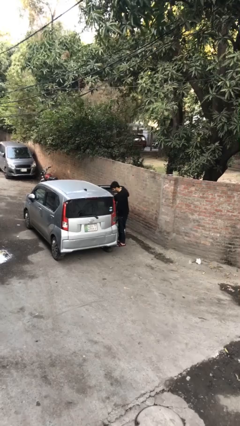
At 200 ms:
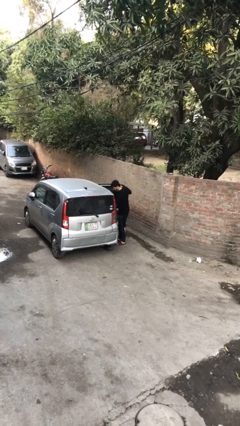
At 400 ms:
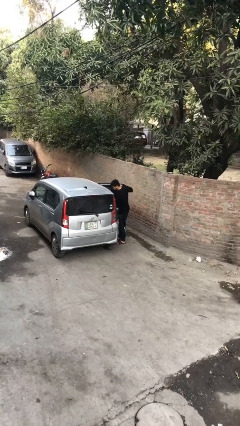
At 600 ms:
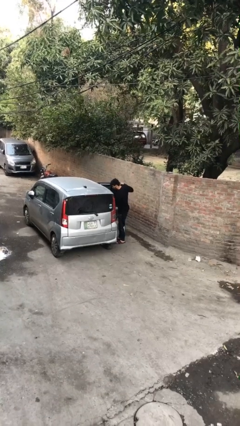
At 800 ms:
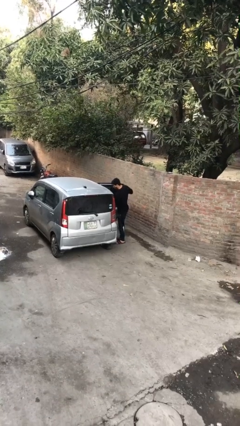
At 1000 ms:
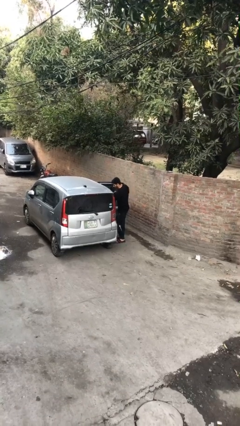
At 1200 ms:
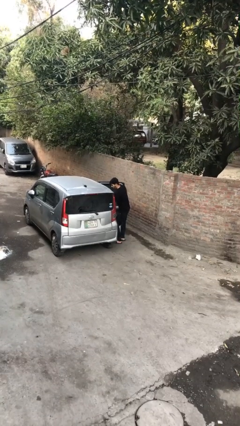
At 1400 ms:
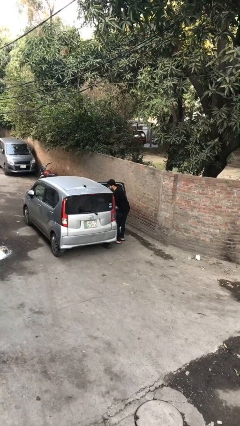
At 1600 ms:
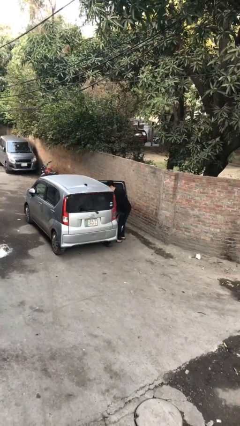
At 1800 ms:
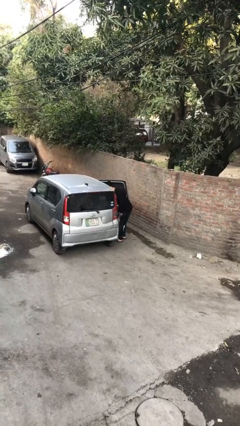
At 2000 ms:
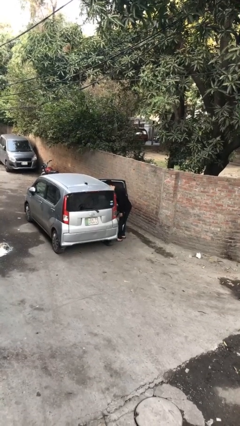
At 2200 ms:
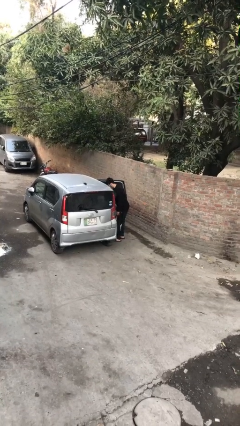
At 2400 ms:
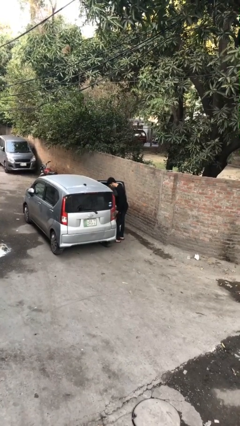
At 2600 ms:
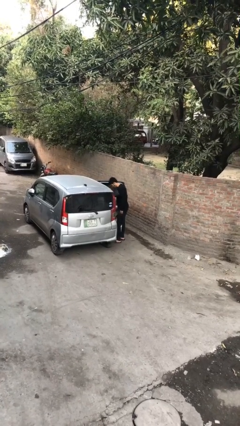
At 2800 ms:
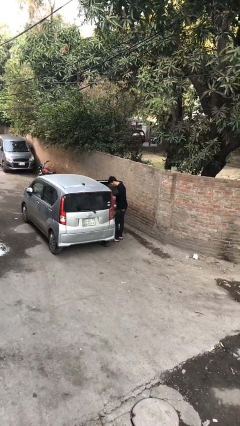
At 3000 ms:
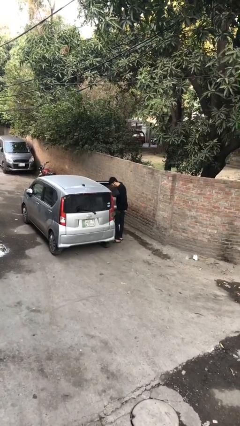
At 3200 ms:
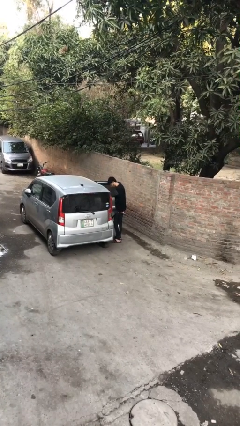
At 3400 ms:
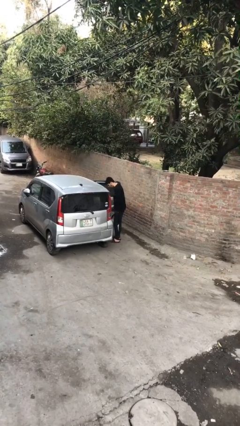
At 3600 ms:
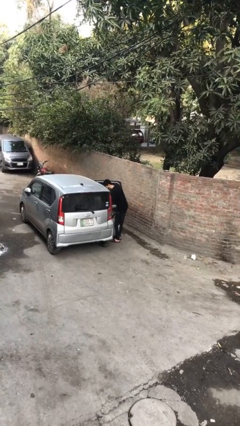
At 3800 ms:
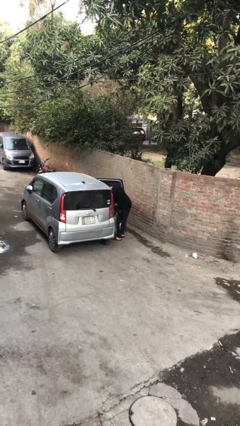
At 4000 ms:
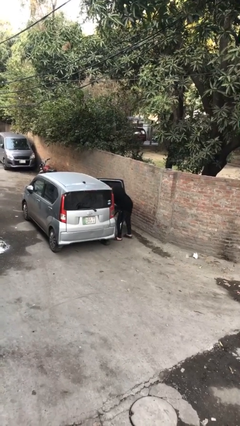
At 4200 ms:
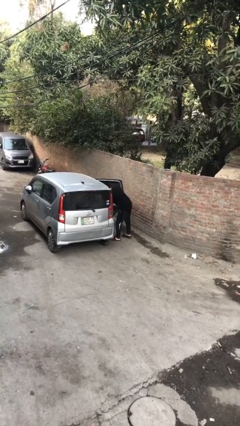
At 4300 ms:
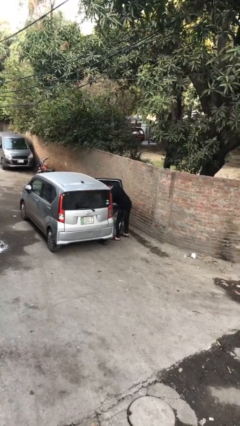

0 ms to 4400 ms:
person loads car

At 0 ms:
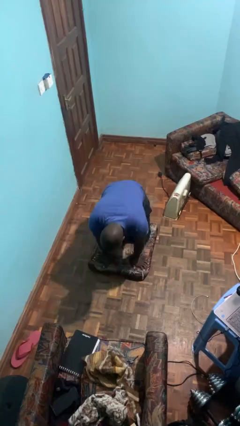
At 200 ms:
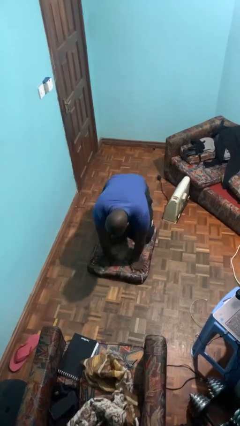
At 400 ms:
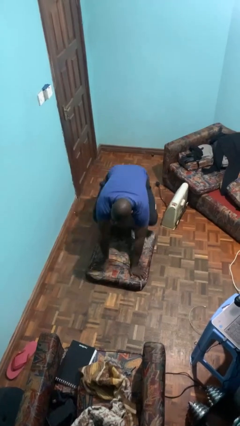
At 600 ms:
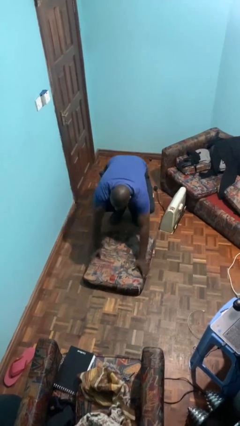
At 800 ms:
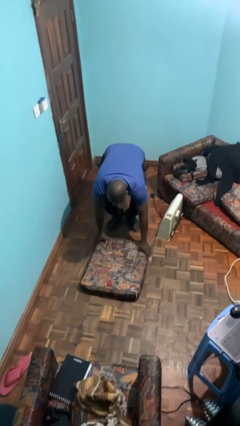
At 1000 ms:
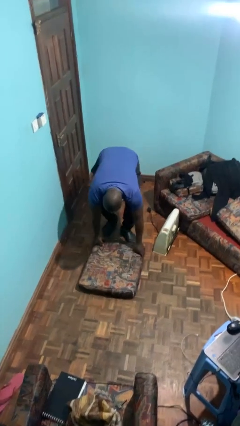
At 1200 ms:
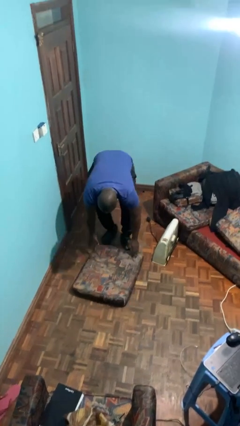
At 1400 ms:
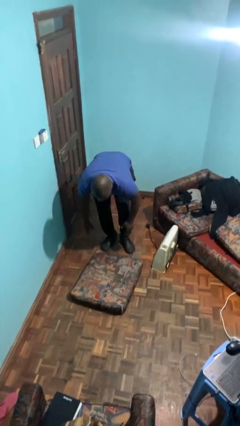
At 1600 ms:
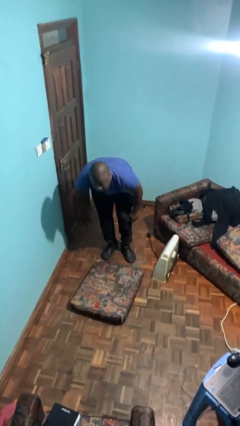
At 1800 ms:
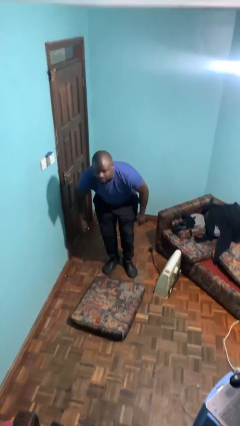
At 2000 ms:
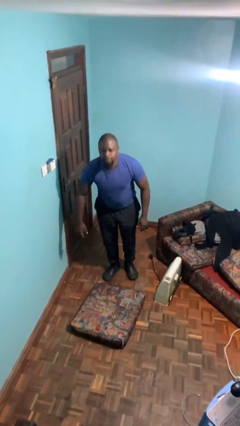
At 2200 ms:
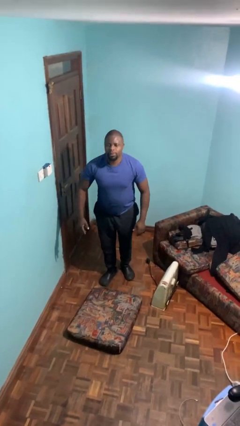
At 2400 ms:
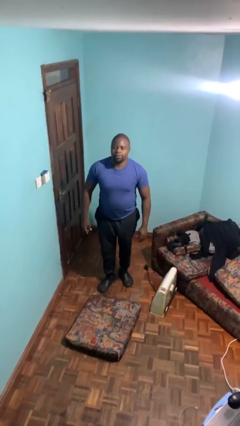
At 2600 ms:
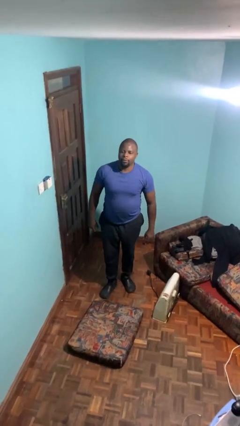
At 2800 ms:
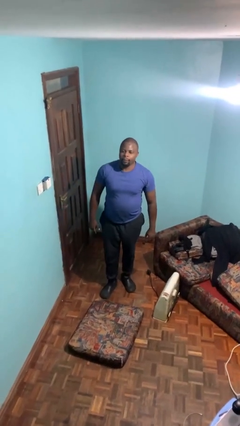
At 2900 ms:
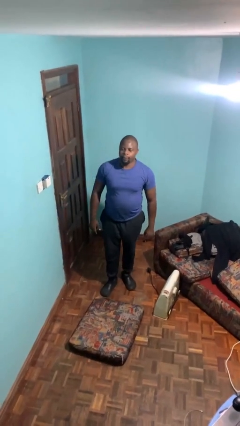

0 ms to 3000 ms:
person stands up from floor

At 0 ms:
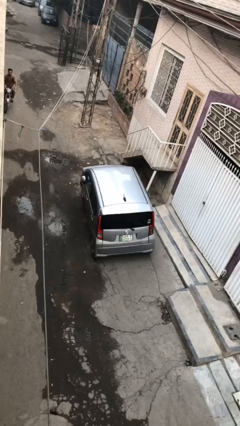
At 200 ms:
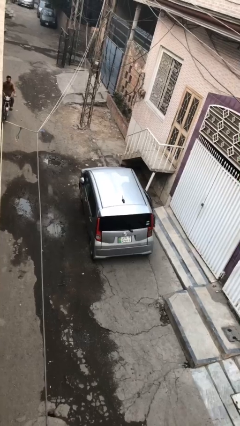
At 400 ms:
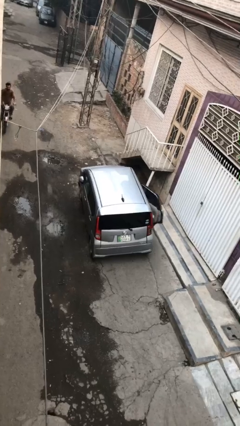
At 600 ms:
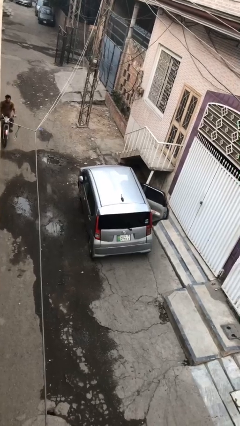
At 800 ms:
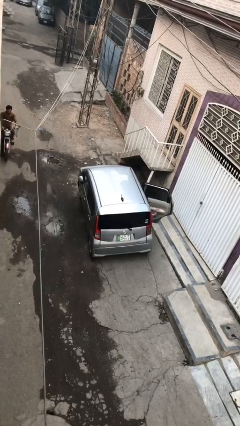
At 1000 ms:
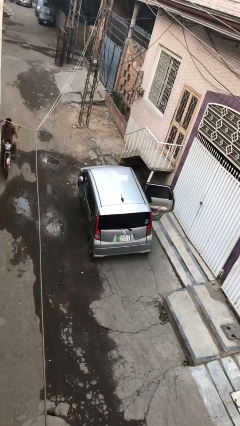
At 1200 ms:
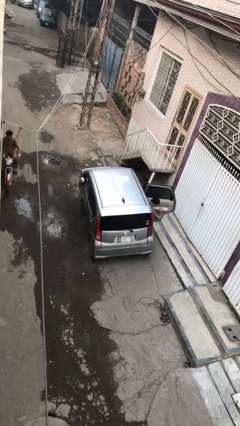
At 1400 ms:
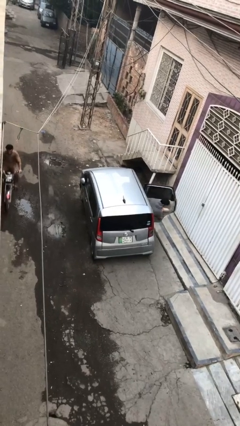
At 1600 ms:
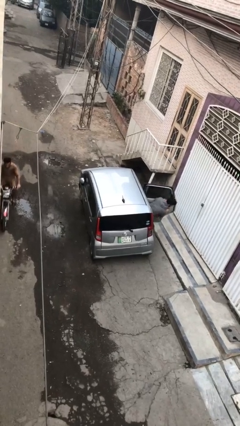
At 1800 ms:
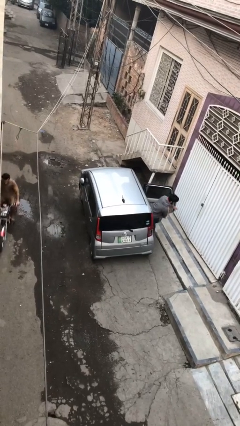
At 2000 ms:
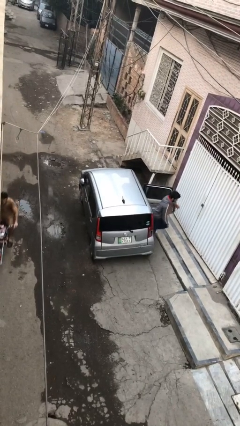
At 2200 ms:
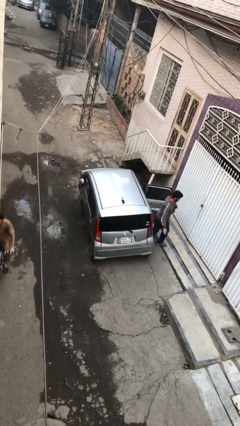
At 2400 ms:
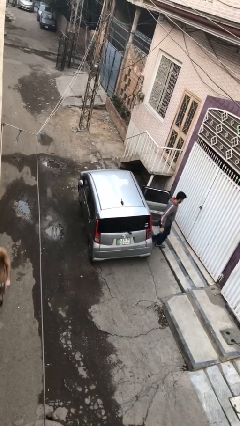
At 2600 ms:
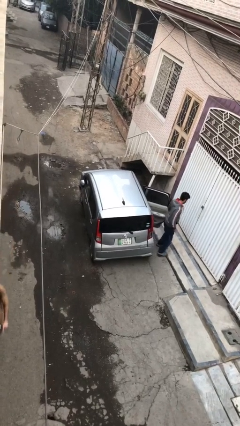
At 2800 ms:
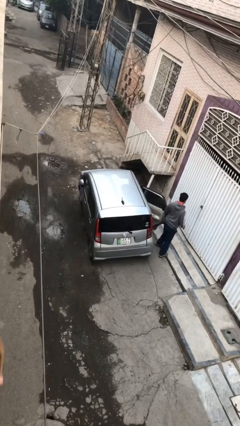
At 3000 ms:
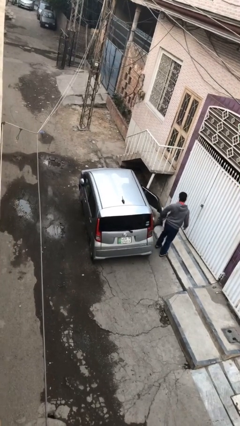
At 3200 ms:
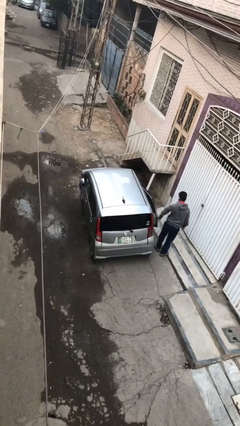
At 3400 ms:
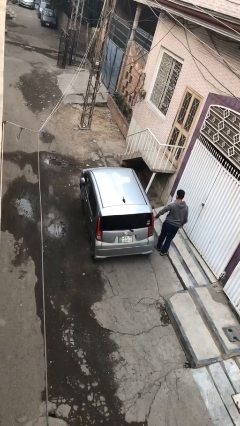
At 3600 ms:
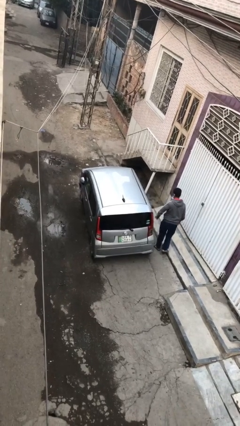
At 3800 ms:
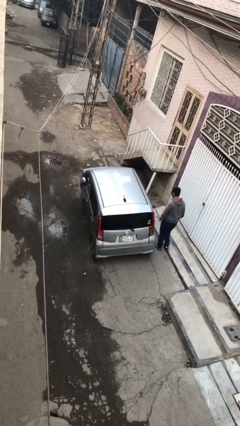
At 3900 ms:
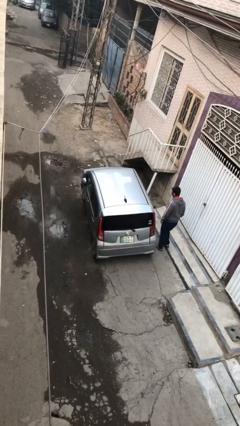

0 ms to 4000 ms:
car drops off person

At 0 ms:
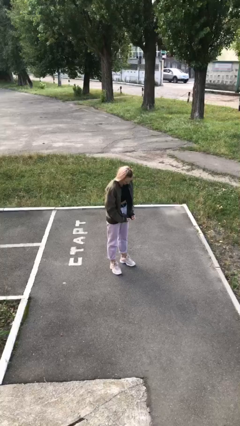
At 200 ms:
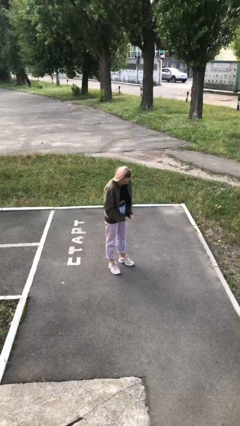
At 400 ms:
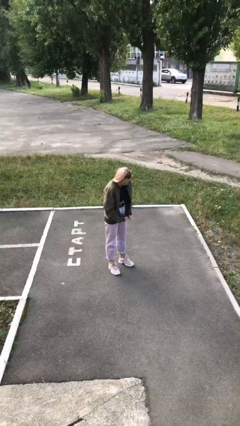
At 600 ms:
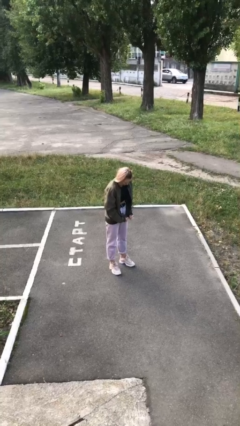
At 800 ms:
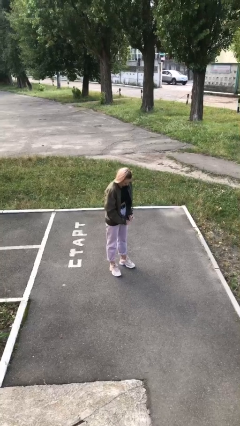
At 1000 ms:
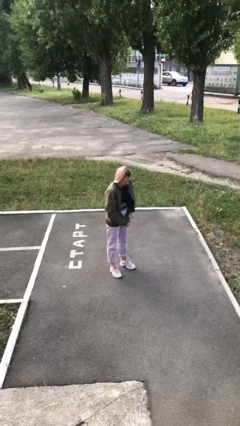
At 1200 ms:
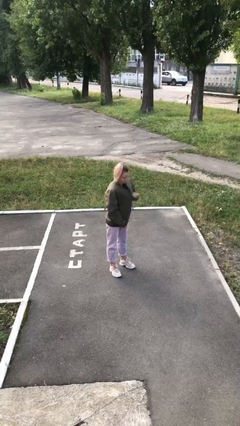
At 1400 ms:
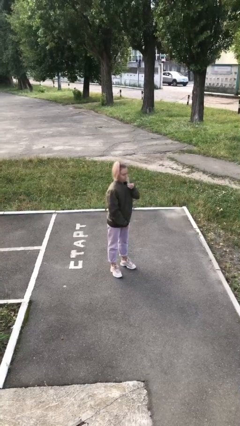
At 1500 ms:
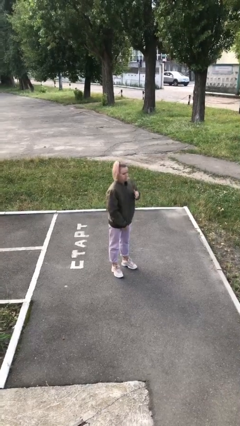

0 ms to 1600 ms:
person zips up jacket

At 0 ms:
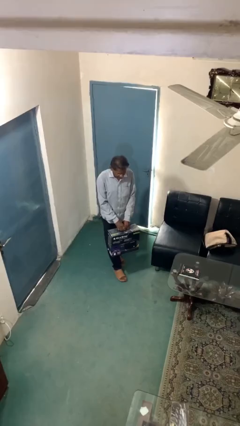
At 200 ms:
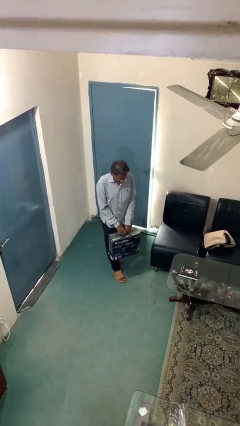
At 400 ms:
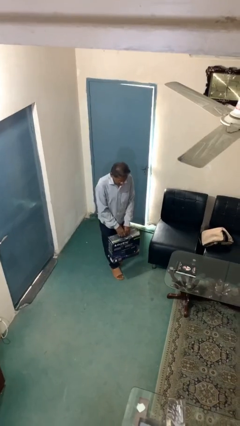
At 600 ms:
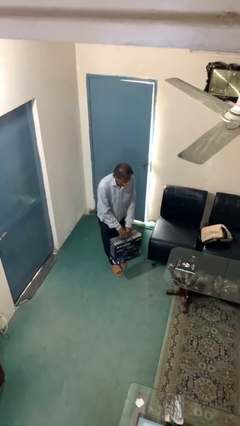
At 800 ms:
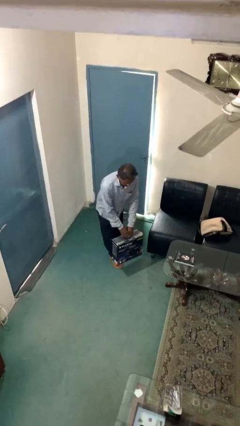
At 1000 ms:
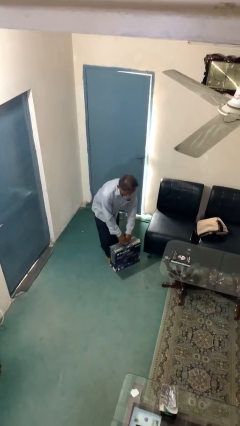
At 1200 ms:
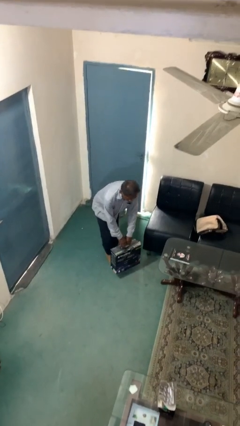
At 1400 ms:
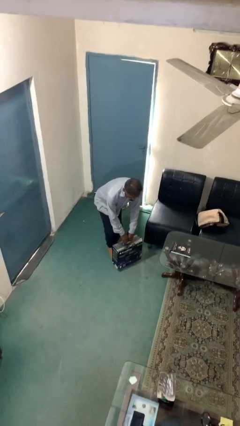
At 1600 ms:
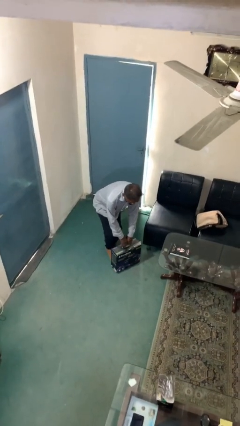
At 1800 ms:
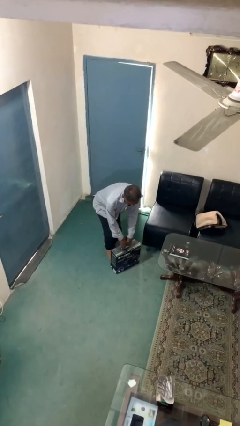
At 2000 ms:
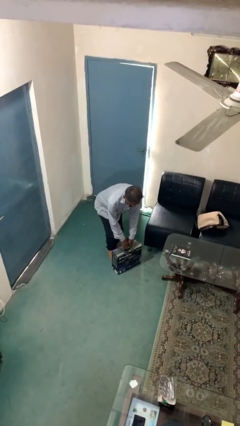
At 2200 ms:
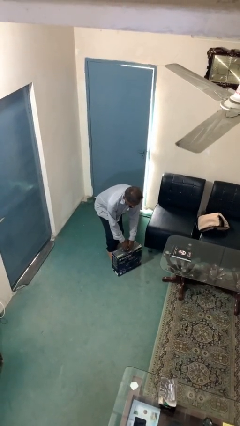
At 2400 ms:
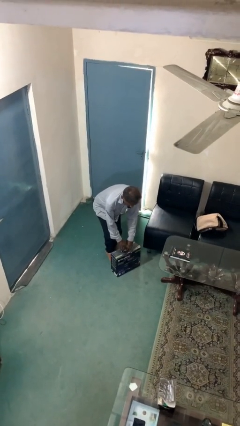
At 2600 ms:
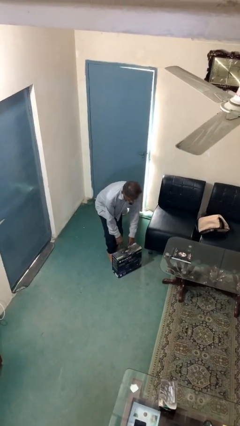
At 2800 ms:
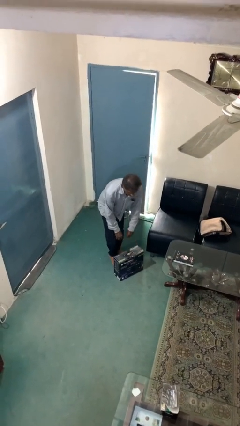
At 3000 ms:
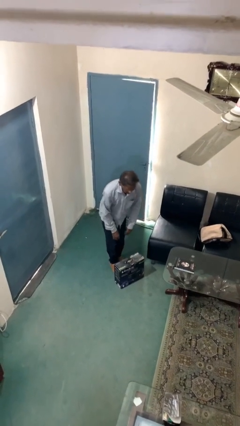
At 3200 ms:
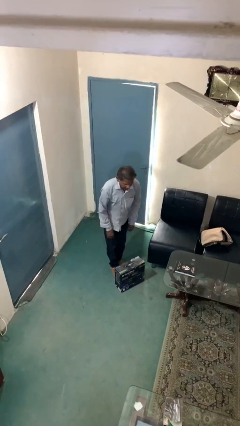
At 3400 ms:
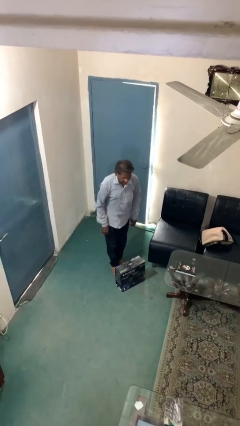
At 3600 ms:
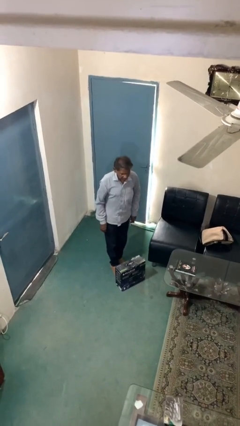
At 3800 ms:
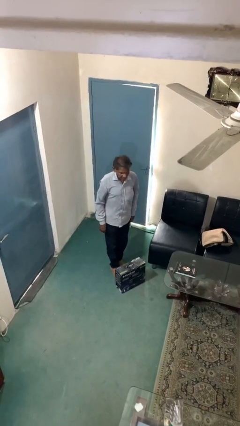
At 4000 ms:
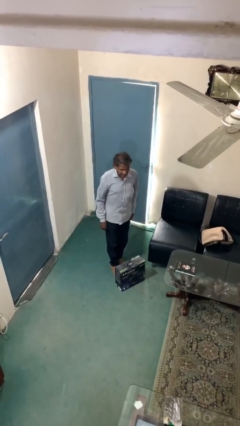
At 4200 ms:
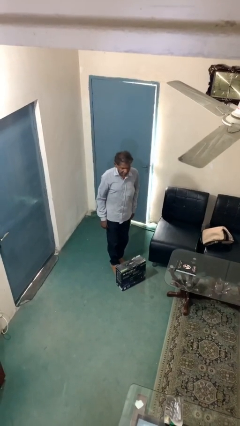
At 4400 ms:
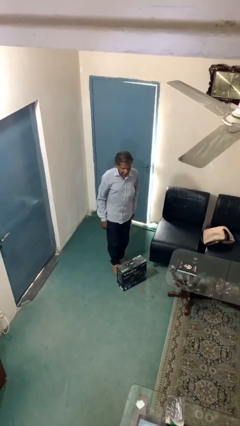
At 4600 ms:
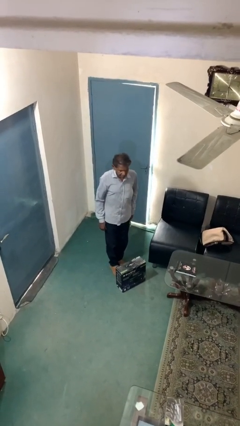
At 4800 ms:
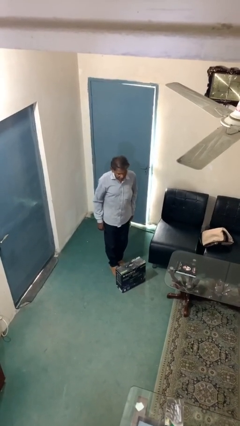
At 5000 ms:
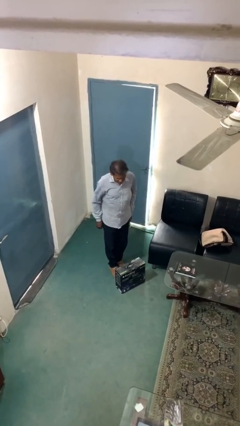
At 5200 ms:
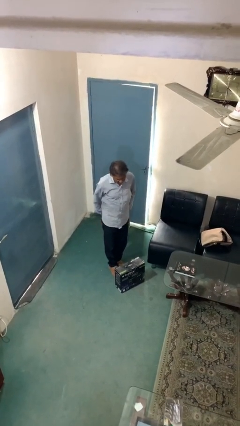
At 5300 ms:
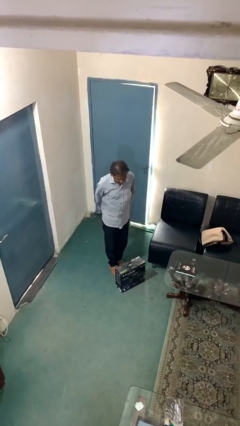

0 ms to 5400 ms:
person puts down object on floor
